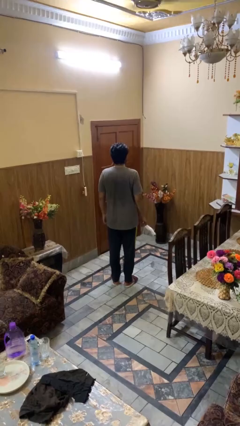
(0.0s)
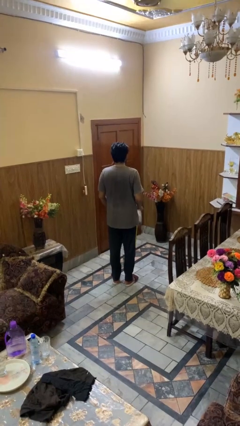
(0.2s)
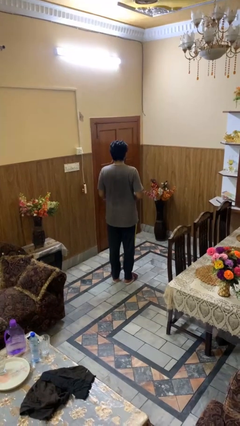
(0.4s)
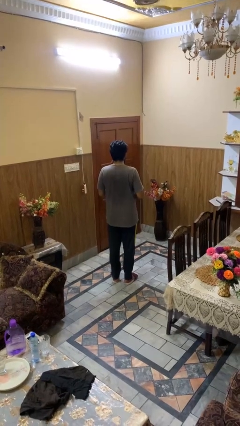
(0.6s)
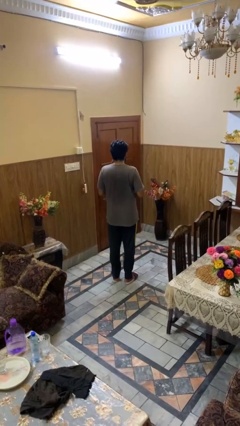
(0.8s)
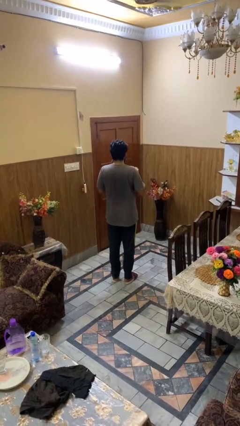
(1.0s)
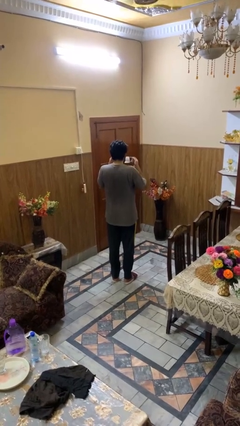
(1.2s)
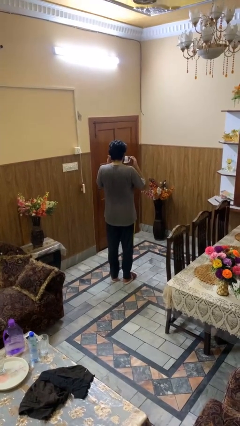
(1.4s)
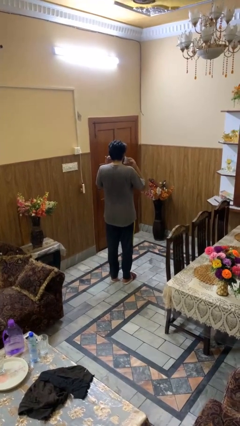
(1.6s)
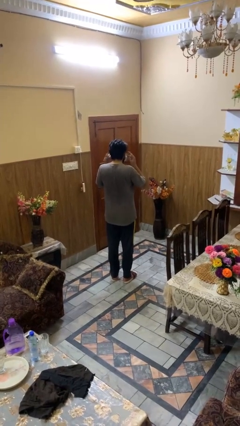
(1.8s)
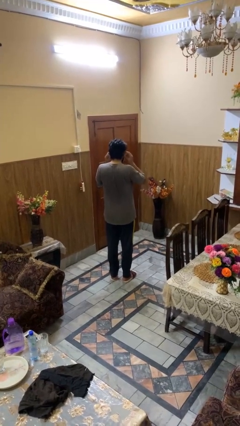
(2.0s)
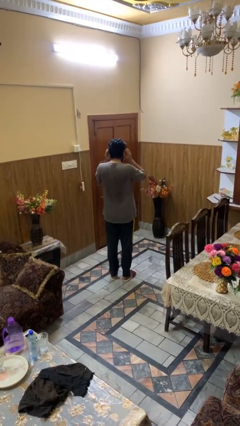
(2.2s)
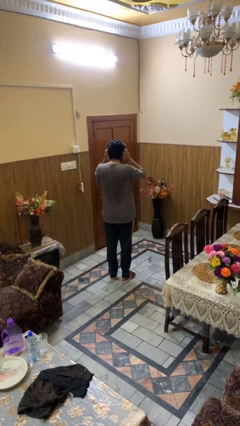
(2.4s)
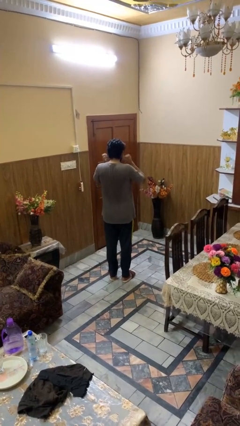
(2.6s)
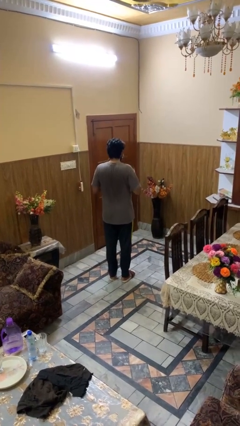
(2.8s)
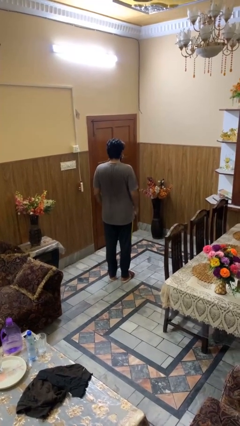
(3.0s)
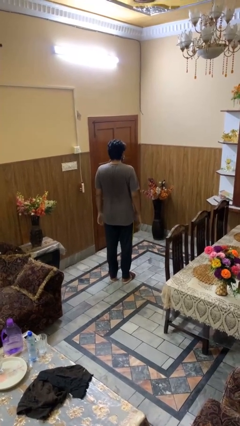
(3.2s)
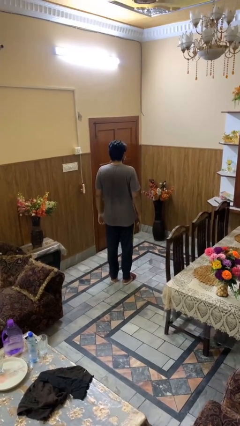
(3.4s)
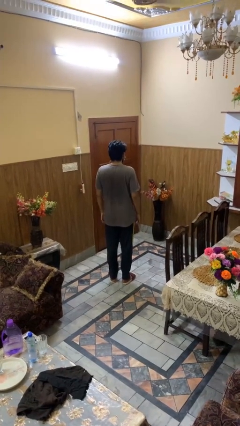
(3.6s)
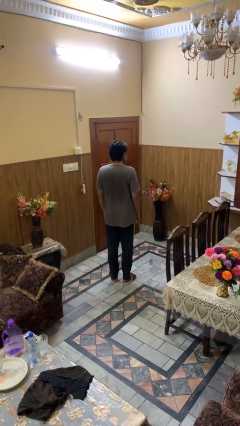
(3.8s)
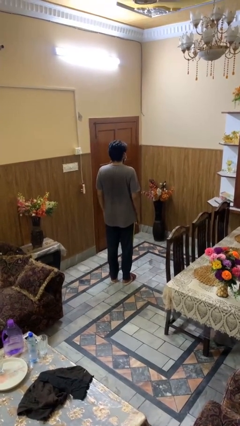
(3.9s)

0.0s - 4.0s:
person puts on facemask

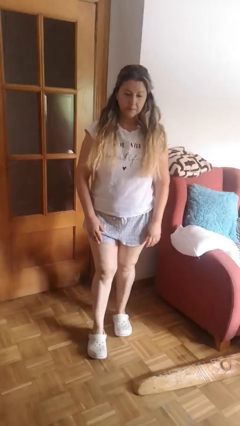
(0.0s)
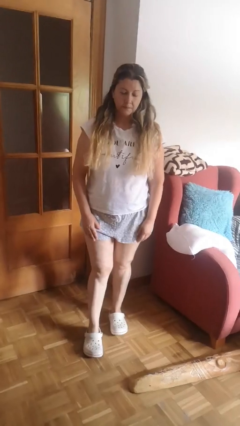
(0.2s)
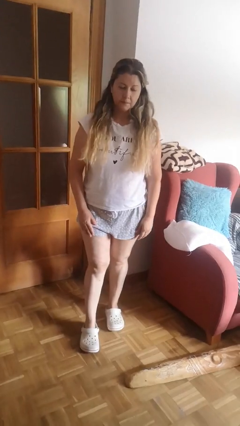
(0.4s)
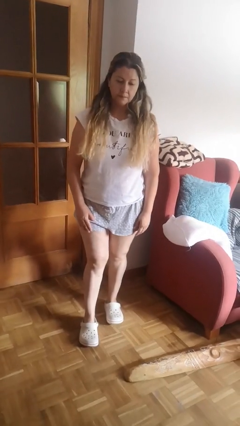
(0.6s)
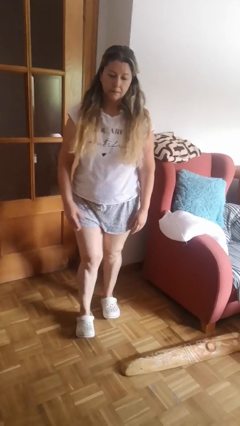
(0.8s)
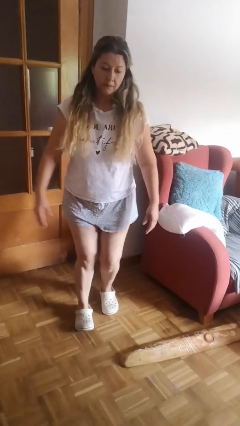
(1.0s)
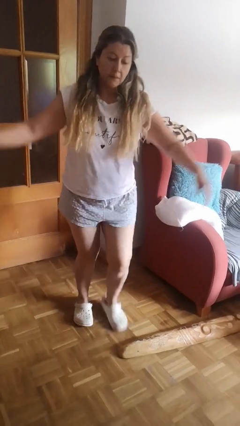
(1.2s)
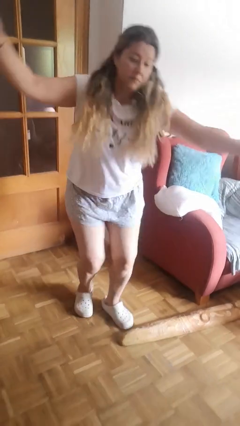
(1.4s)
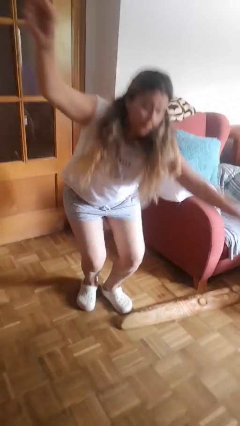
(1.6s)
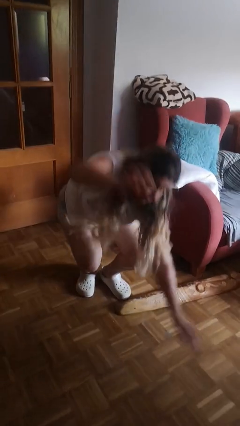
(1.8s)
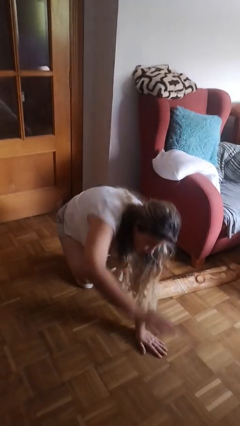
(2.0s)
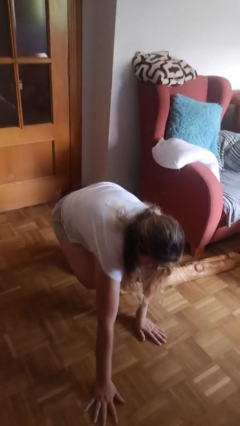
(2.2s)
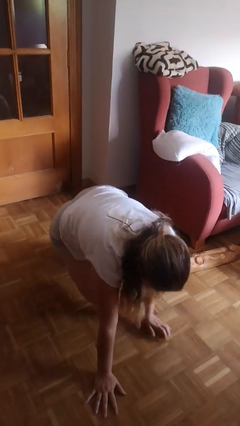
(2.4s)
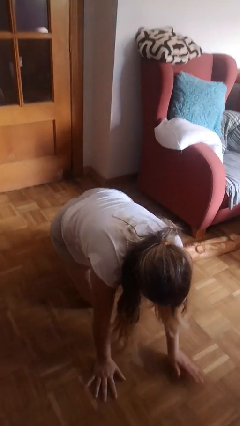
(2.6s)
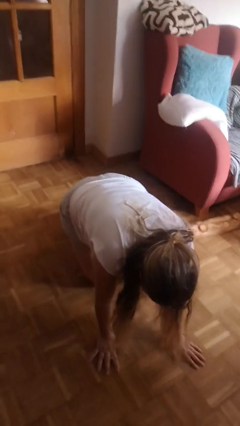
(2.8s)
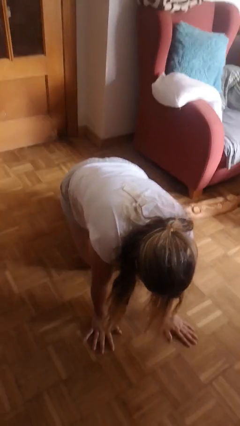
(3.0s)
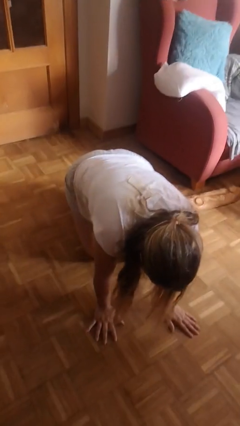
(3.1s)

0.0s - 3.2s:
person trips on object on floor

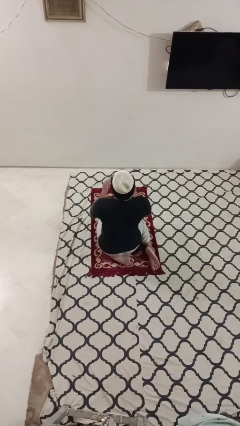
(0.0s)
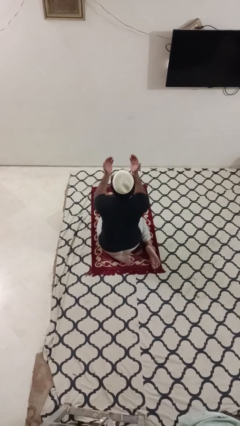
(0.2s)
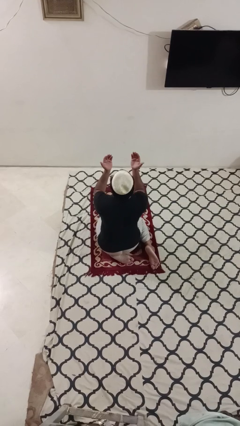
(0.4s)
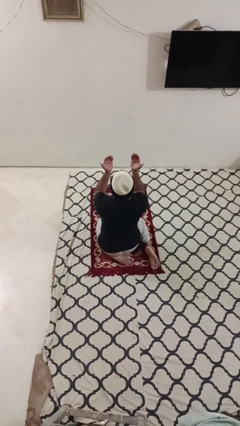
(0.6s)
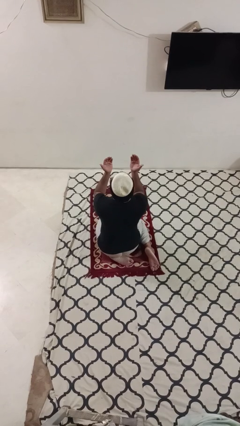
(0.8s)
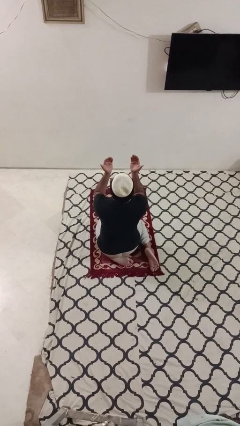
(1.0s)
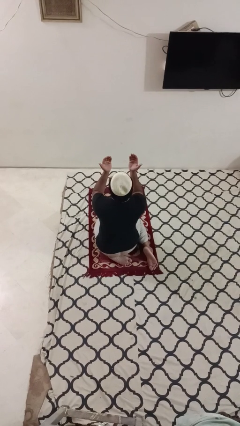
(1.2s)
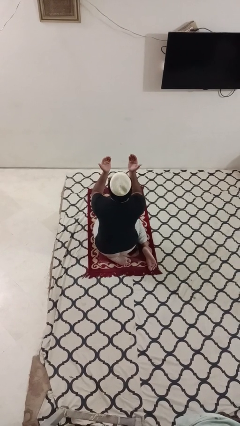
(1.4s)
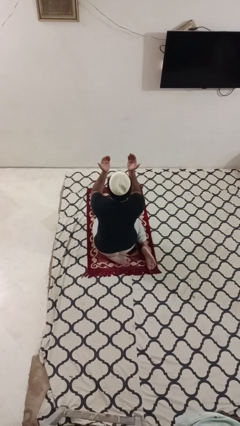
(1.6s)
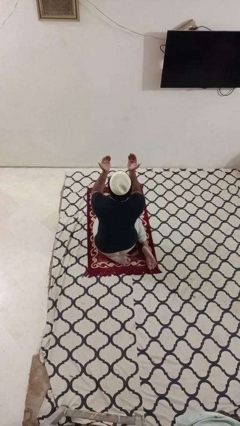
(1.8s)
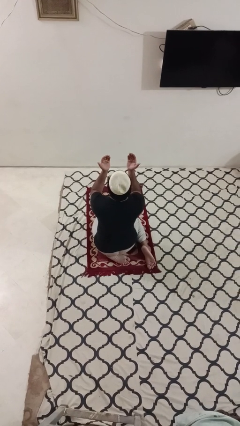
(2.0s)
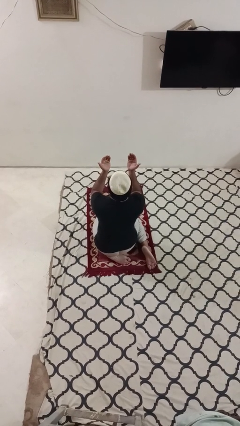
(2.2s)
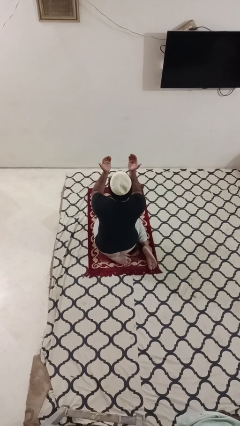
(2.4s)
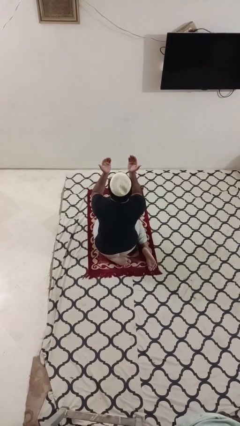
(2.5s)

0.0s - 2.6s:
person prays

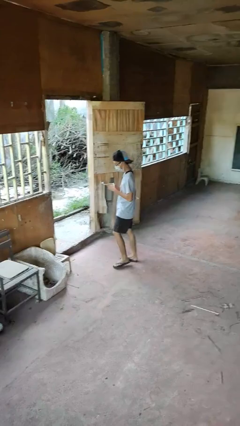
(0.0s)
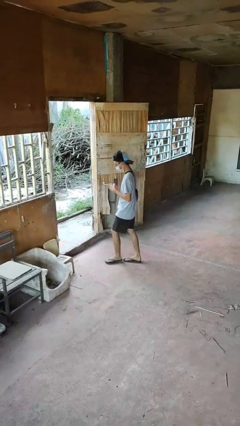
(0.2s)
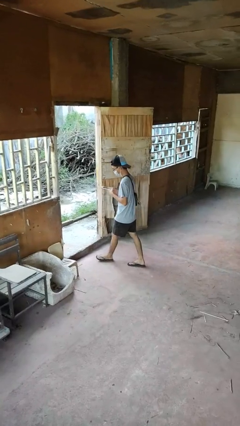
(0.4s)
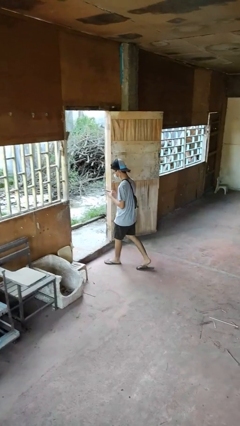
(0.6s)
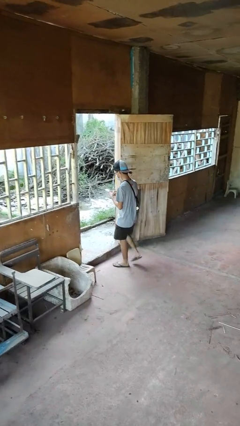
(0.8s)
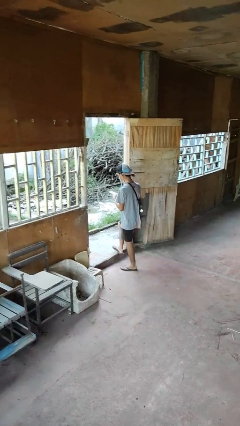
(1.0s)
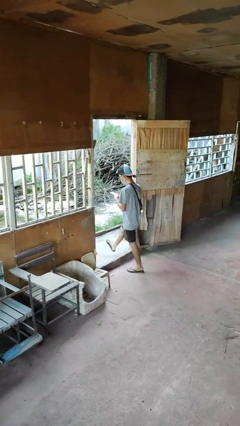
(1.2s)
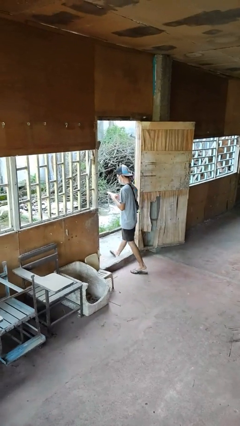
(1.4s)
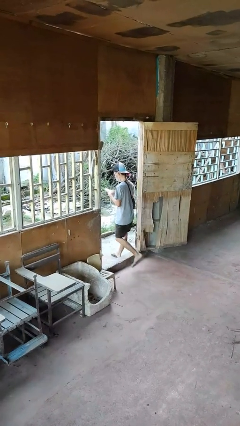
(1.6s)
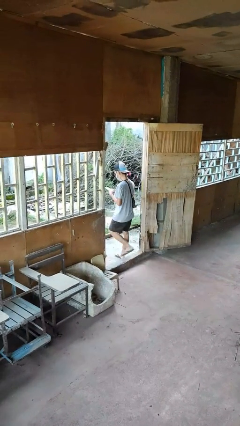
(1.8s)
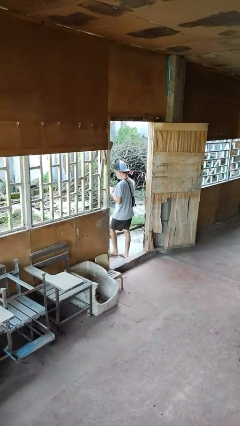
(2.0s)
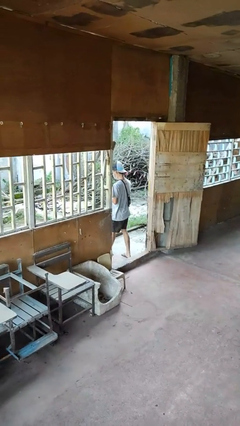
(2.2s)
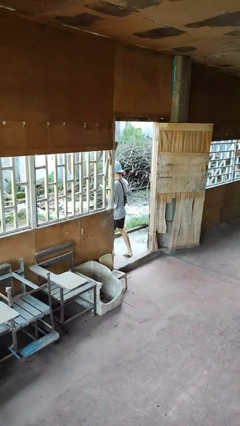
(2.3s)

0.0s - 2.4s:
person exits scene through structure

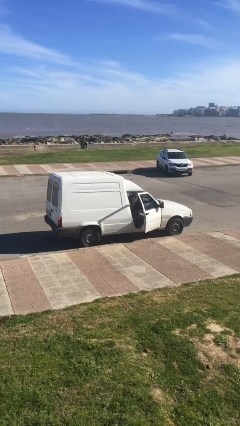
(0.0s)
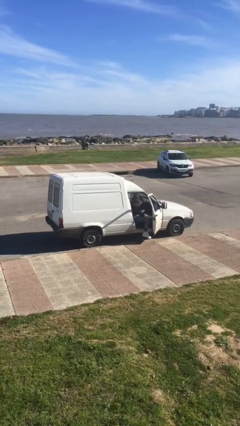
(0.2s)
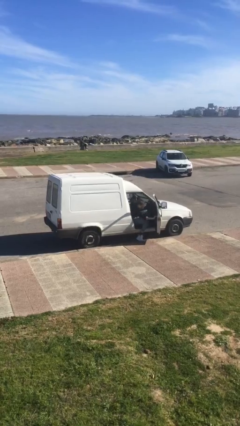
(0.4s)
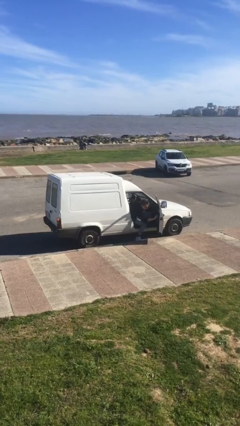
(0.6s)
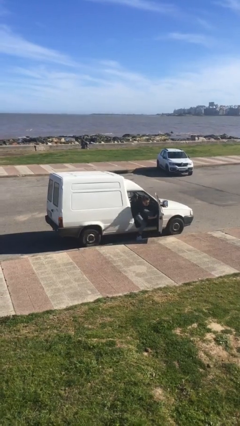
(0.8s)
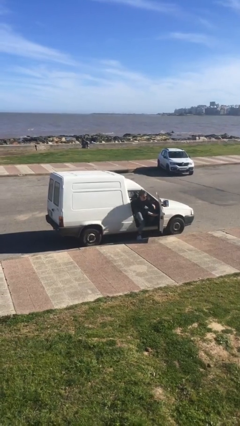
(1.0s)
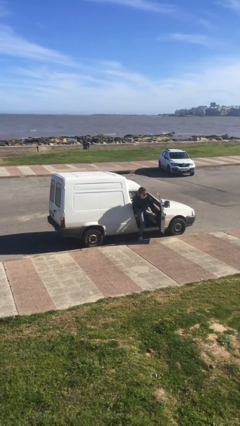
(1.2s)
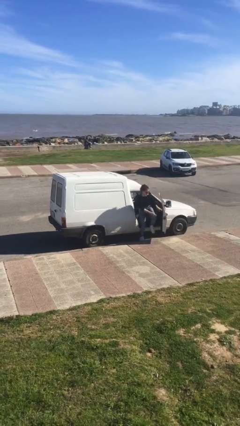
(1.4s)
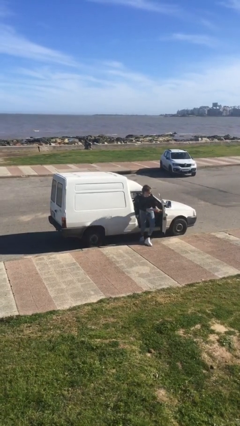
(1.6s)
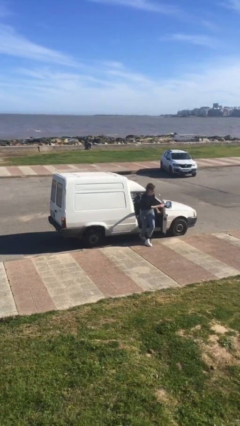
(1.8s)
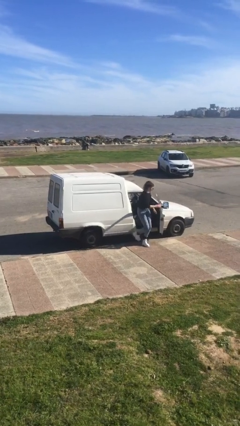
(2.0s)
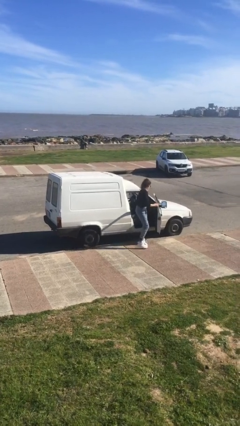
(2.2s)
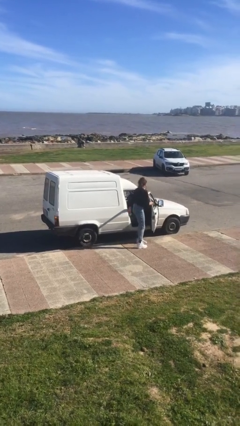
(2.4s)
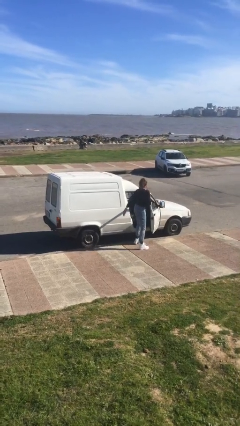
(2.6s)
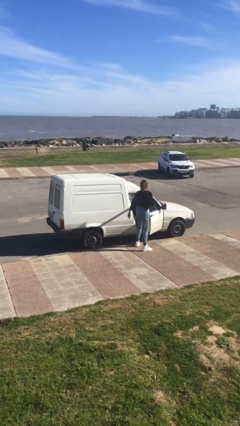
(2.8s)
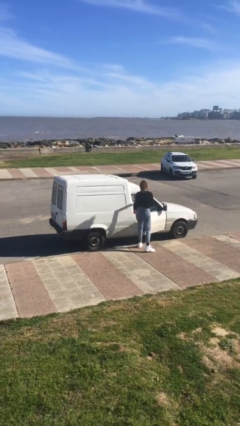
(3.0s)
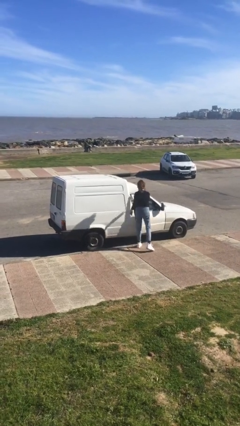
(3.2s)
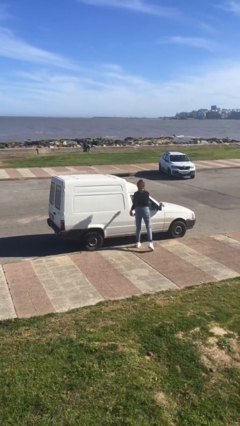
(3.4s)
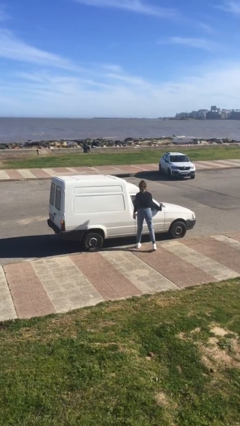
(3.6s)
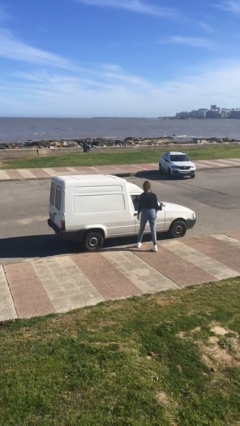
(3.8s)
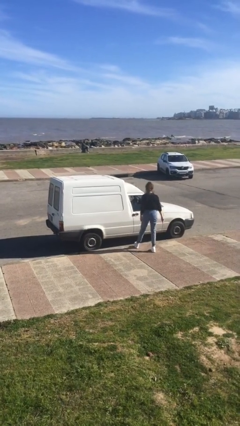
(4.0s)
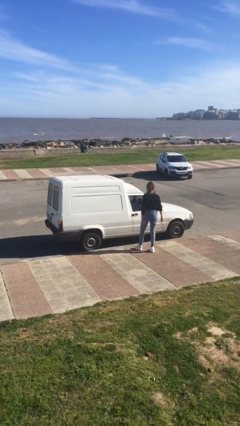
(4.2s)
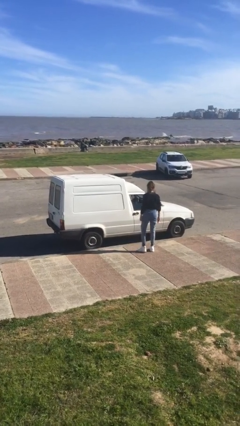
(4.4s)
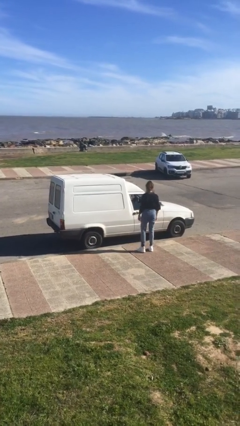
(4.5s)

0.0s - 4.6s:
car drops off person

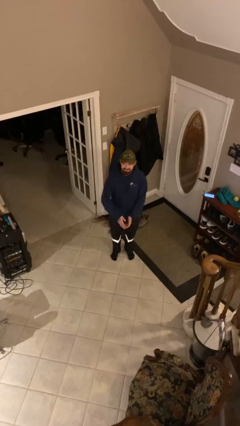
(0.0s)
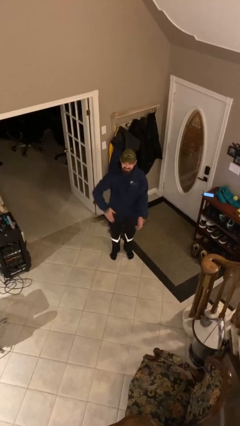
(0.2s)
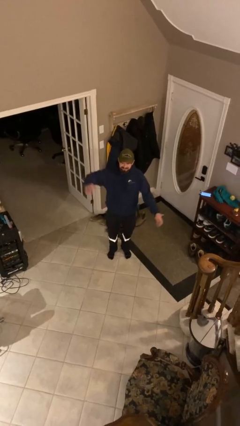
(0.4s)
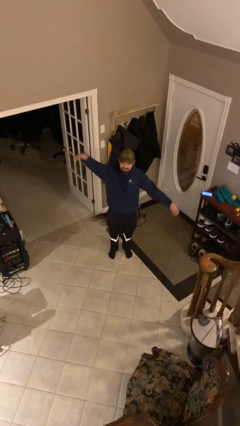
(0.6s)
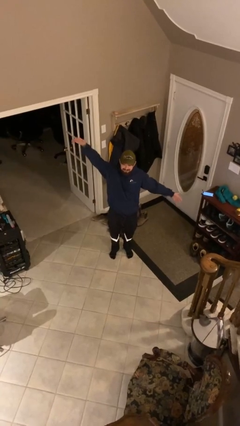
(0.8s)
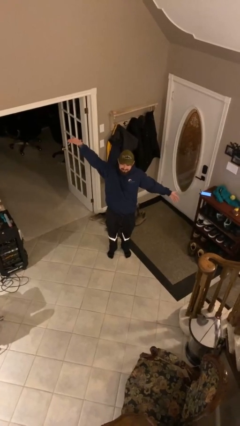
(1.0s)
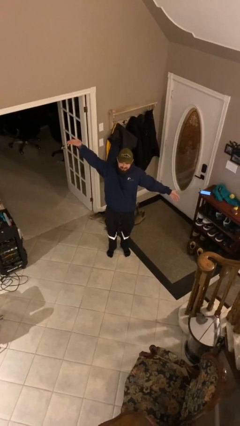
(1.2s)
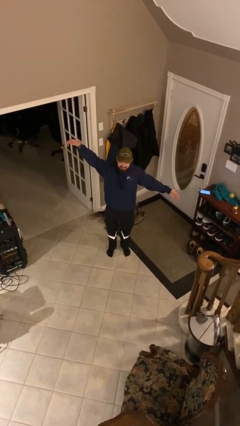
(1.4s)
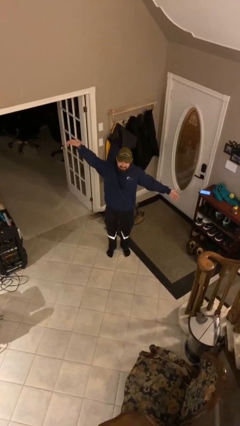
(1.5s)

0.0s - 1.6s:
person gestures zoom in
